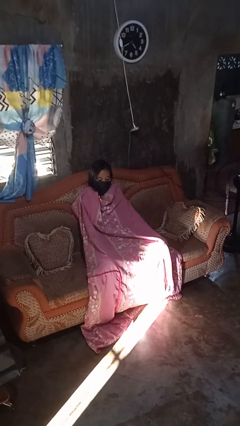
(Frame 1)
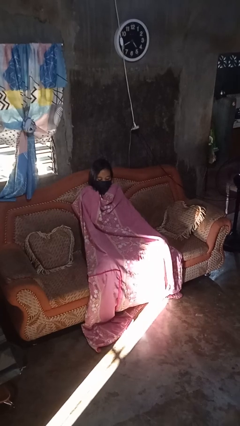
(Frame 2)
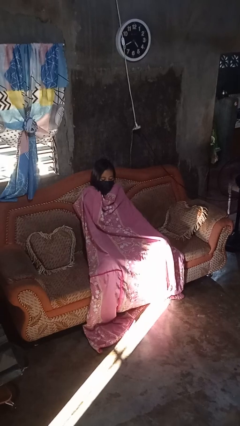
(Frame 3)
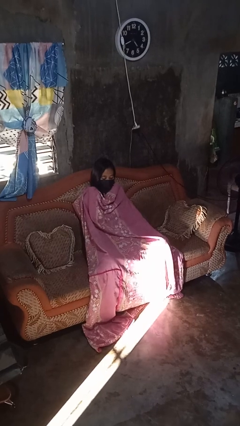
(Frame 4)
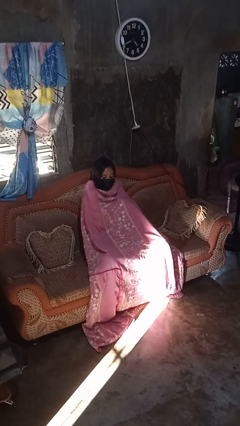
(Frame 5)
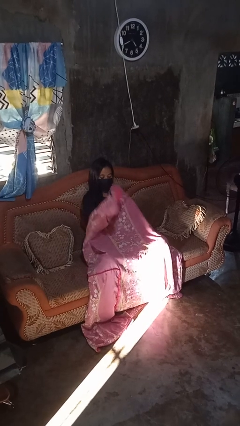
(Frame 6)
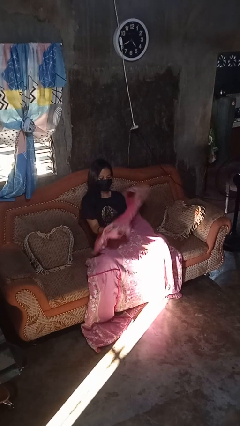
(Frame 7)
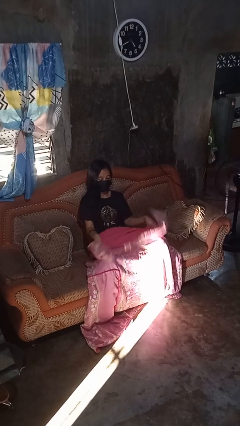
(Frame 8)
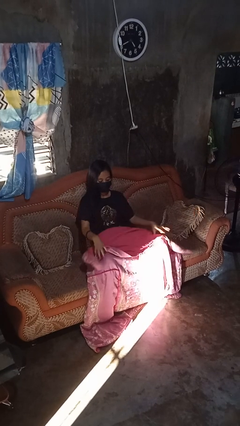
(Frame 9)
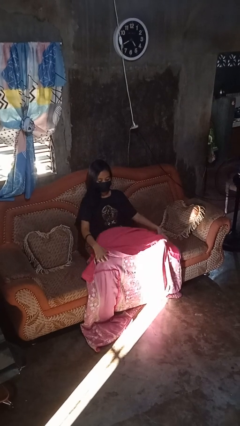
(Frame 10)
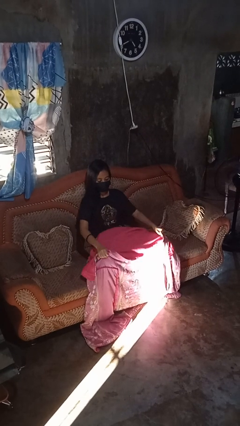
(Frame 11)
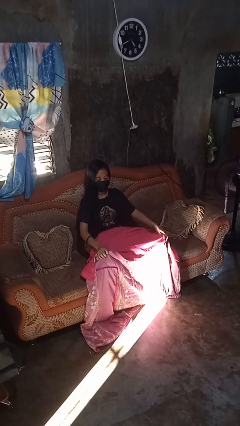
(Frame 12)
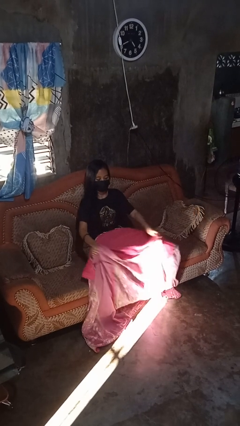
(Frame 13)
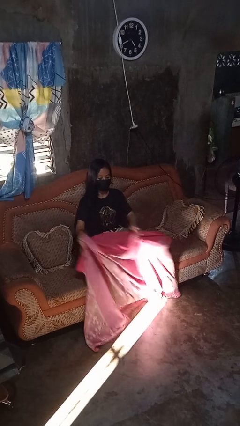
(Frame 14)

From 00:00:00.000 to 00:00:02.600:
person uncovers with blanket

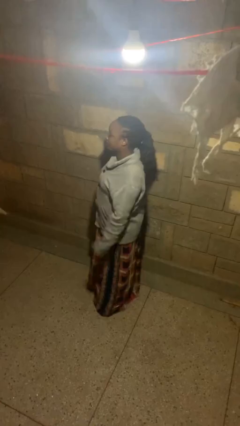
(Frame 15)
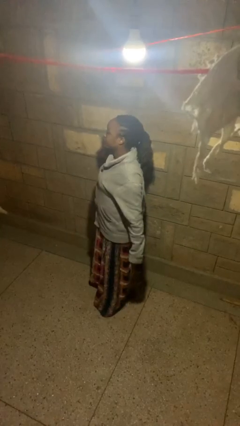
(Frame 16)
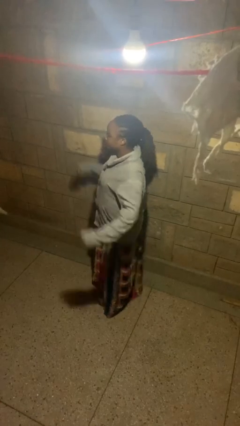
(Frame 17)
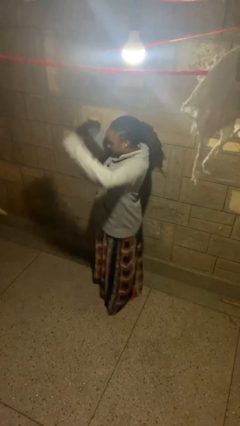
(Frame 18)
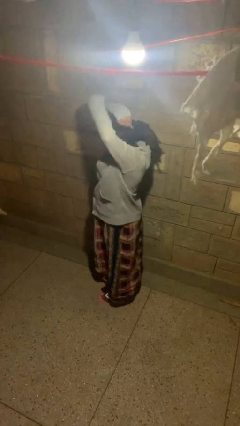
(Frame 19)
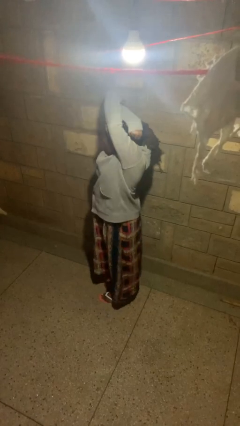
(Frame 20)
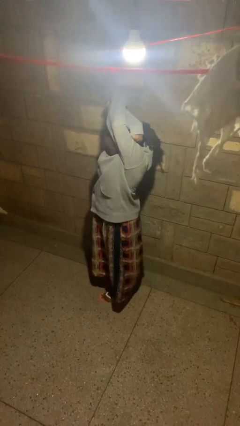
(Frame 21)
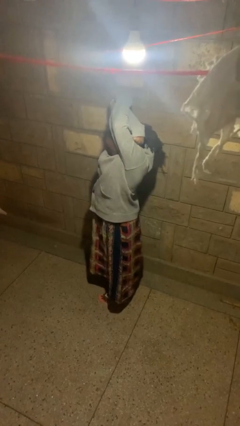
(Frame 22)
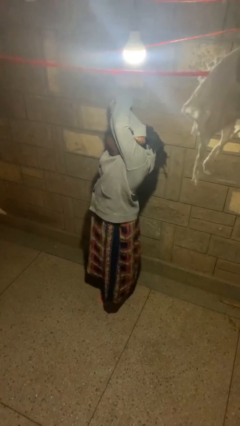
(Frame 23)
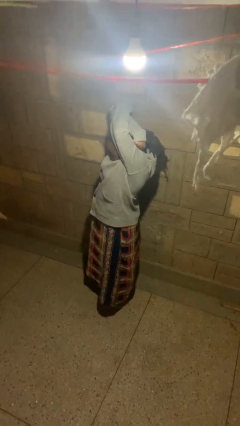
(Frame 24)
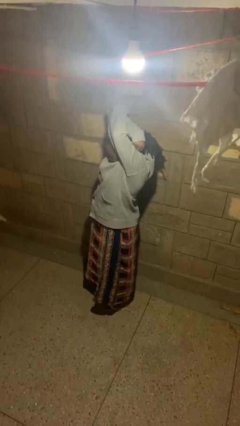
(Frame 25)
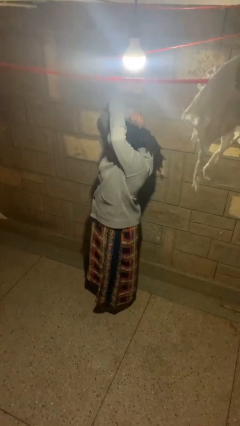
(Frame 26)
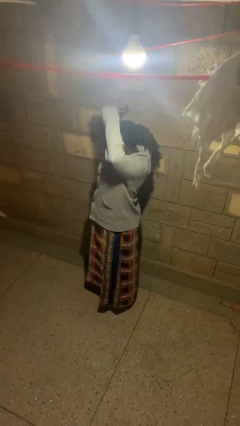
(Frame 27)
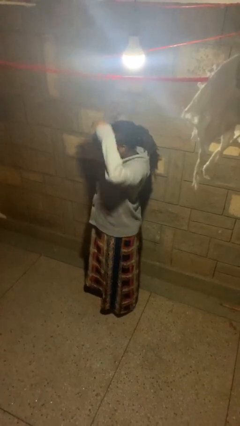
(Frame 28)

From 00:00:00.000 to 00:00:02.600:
person stretches arms over head

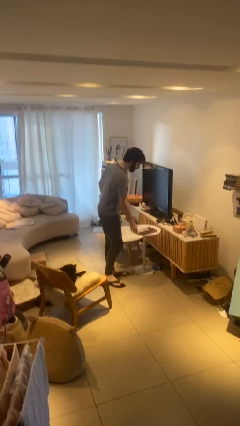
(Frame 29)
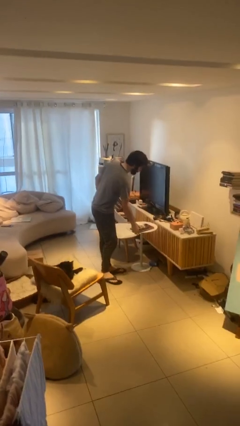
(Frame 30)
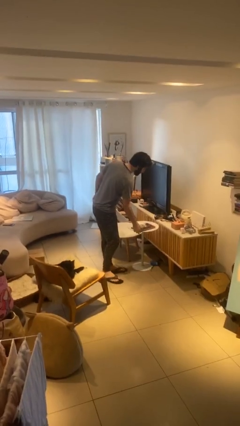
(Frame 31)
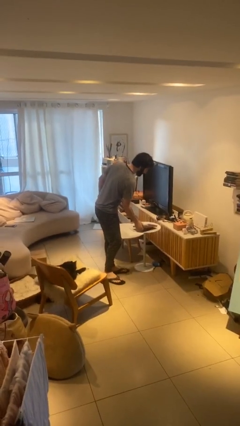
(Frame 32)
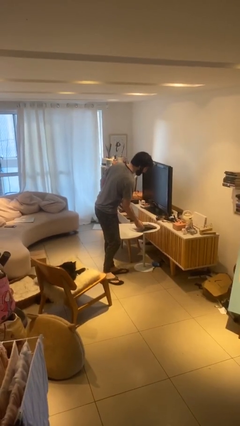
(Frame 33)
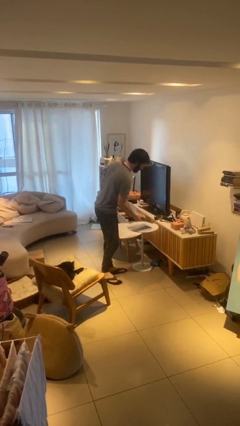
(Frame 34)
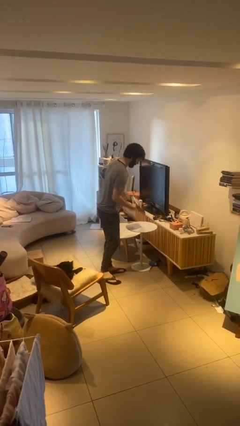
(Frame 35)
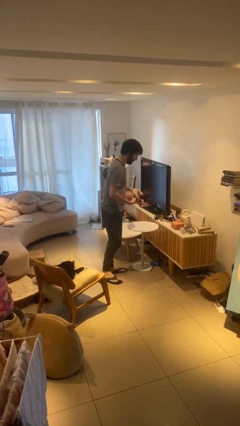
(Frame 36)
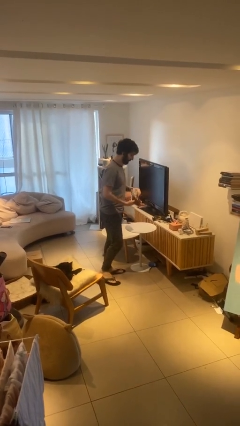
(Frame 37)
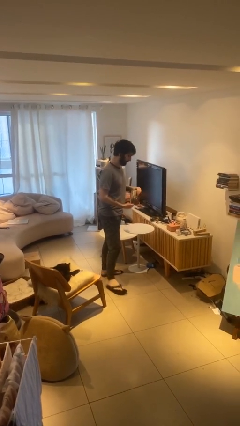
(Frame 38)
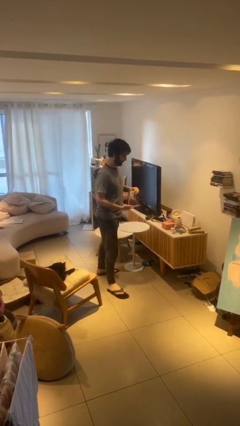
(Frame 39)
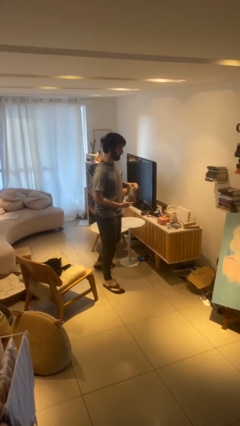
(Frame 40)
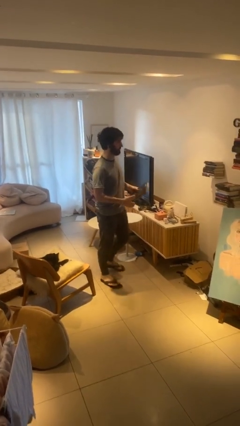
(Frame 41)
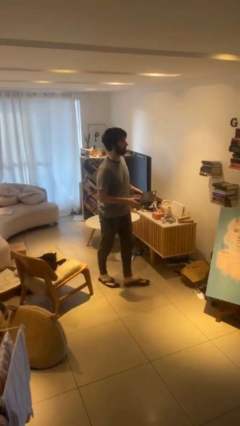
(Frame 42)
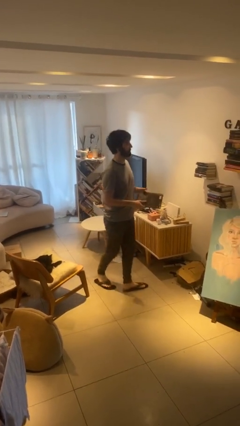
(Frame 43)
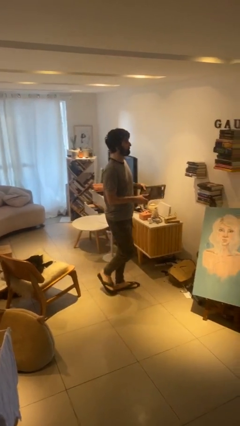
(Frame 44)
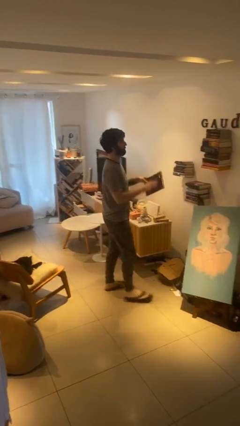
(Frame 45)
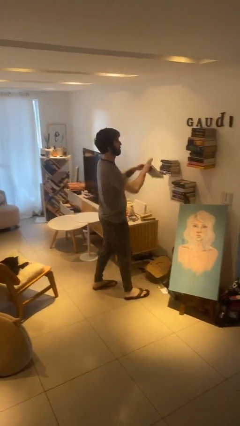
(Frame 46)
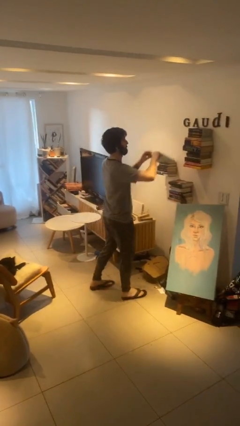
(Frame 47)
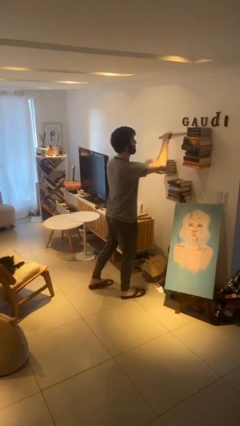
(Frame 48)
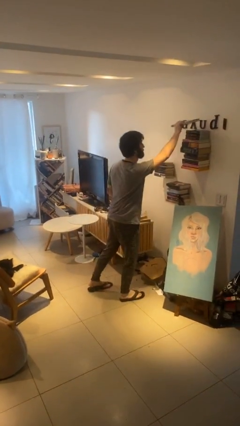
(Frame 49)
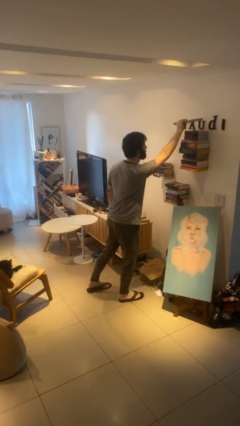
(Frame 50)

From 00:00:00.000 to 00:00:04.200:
person picks up object from table

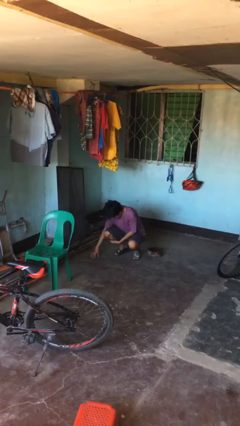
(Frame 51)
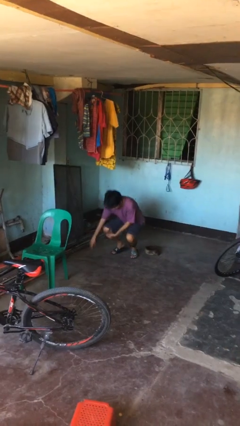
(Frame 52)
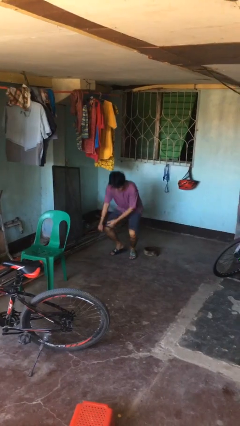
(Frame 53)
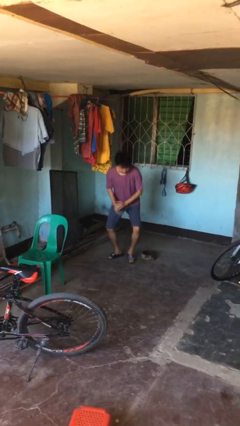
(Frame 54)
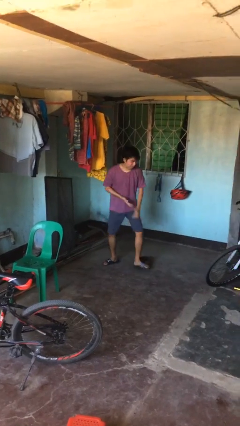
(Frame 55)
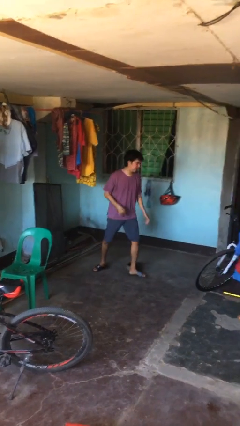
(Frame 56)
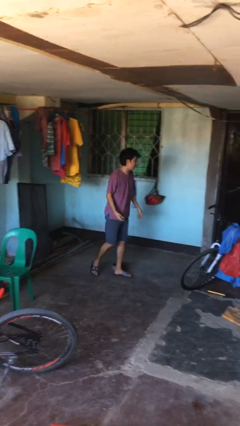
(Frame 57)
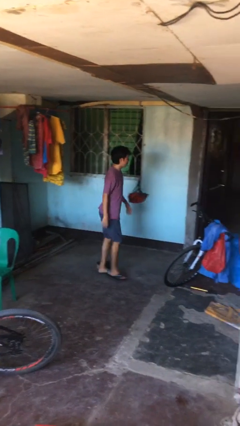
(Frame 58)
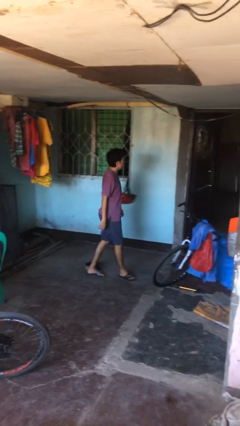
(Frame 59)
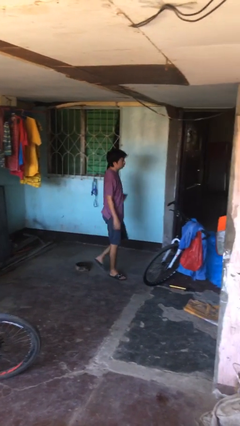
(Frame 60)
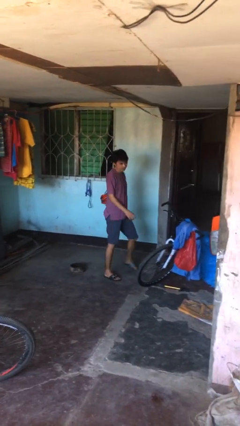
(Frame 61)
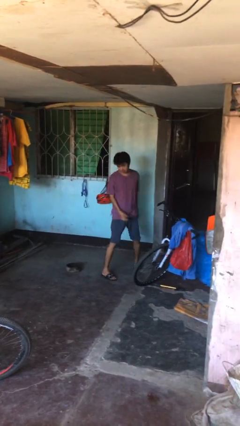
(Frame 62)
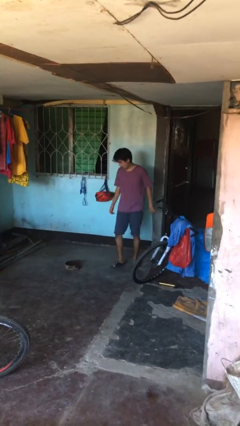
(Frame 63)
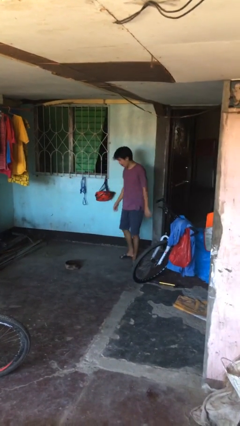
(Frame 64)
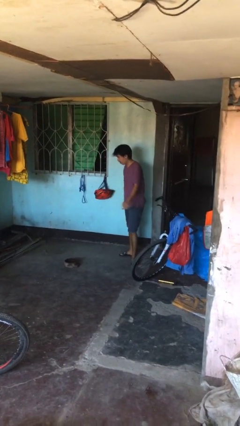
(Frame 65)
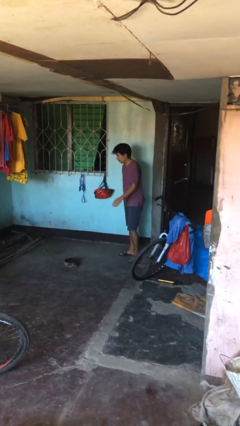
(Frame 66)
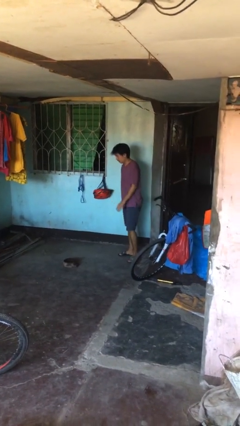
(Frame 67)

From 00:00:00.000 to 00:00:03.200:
person stands up from floor

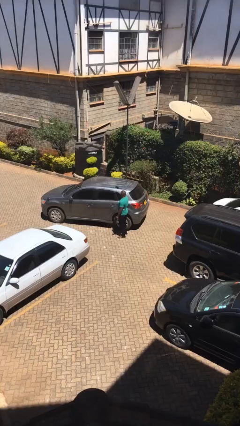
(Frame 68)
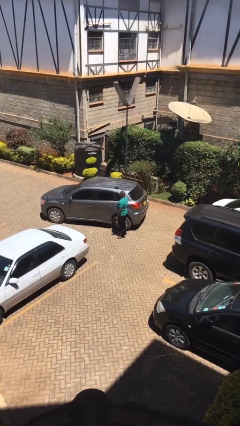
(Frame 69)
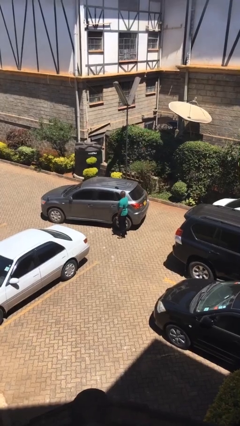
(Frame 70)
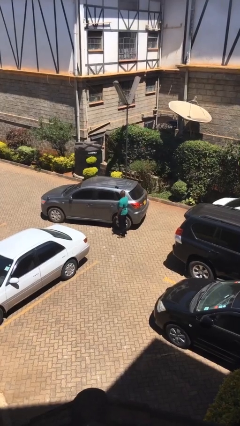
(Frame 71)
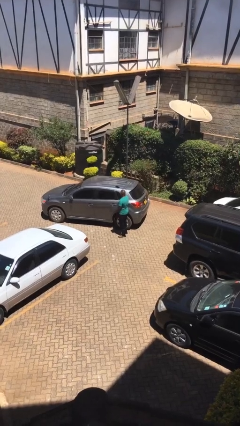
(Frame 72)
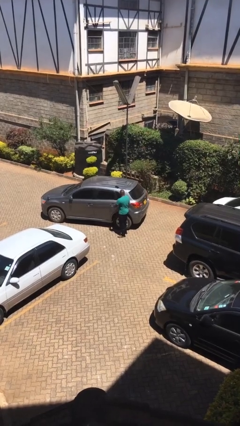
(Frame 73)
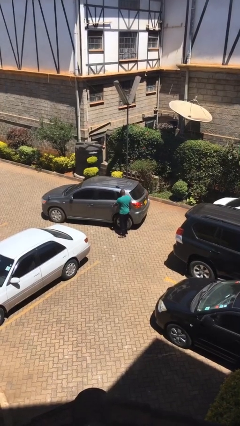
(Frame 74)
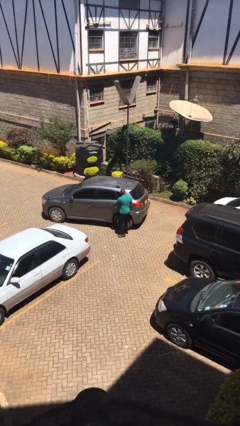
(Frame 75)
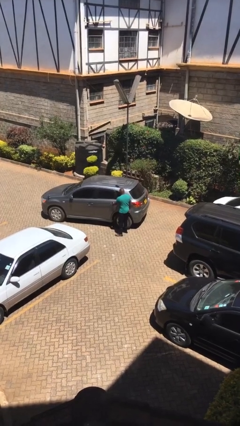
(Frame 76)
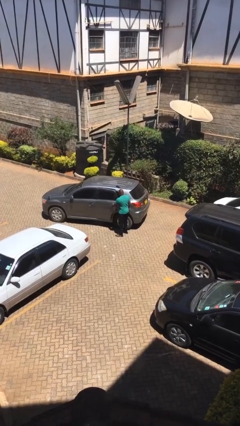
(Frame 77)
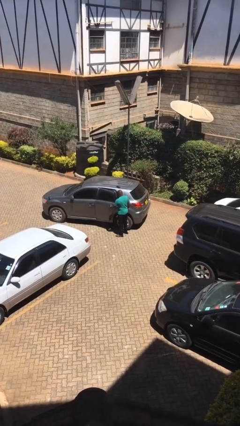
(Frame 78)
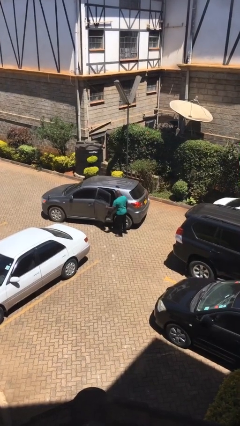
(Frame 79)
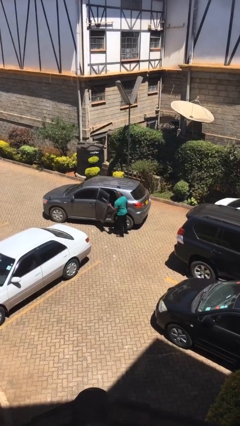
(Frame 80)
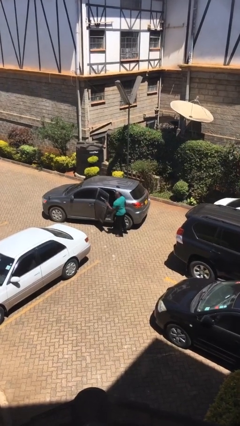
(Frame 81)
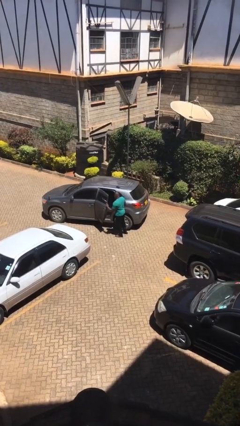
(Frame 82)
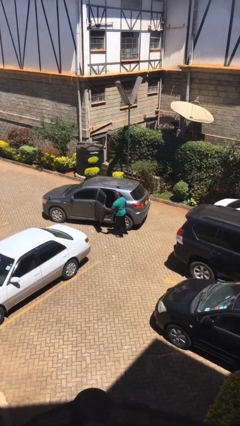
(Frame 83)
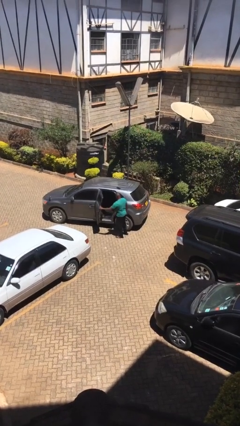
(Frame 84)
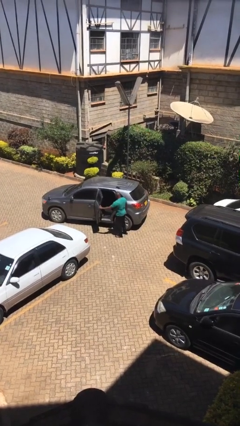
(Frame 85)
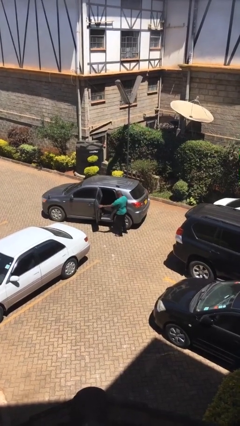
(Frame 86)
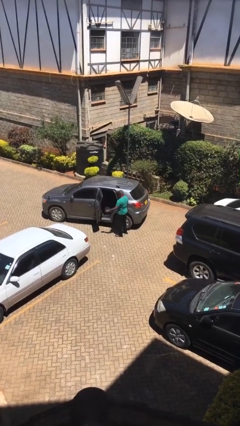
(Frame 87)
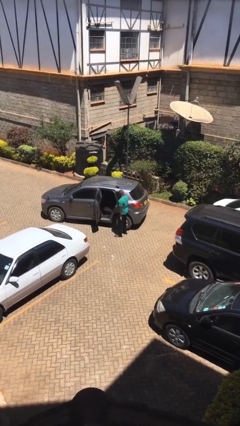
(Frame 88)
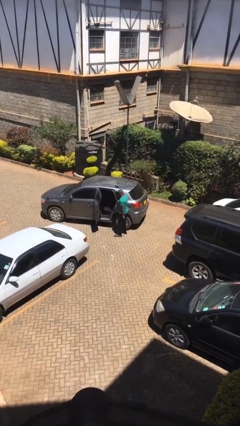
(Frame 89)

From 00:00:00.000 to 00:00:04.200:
person opens car door

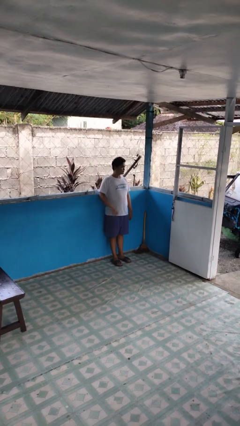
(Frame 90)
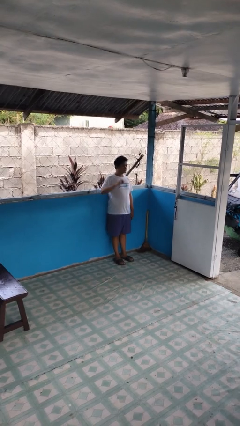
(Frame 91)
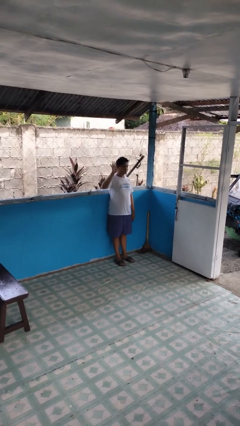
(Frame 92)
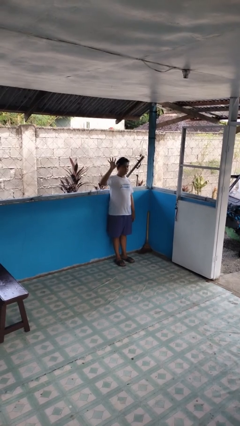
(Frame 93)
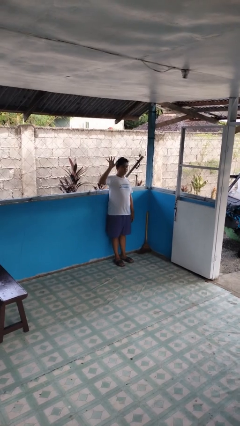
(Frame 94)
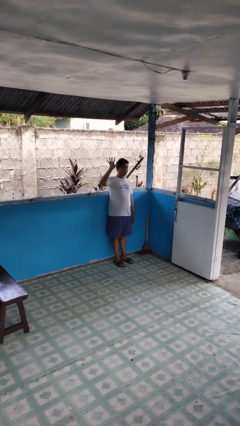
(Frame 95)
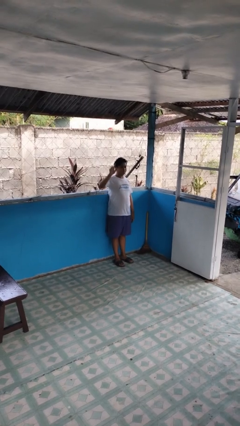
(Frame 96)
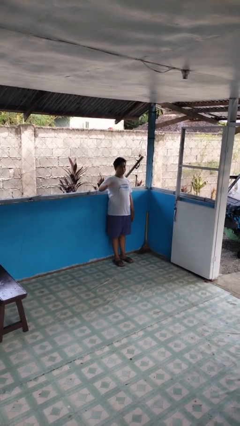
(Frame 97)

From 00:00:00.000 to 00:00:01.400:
person gestures number five
